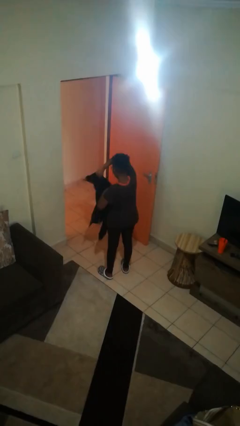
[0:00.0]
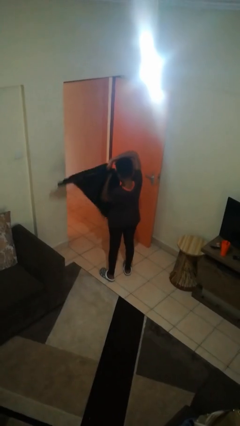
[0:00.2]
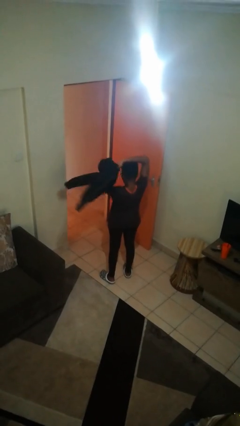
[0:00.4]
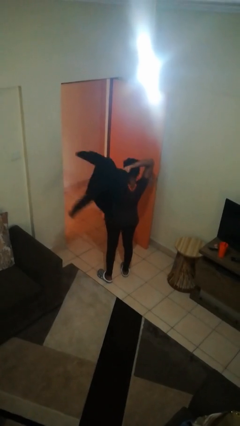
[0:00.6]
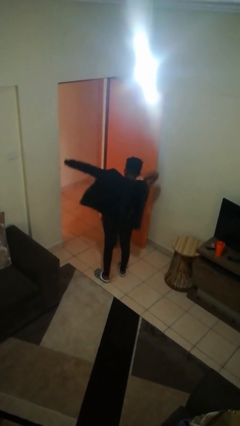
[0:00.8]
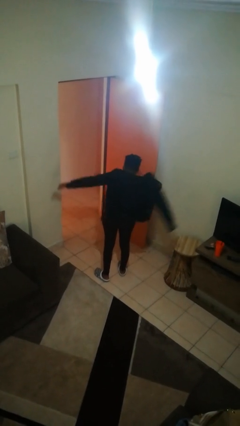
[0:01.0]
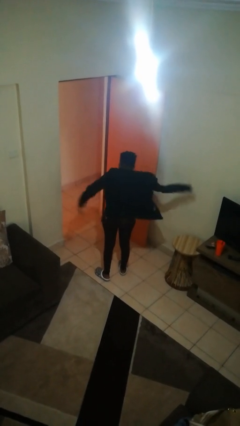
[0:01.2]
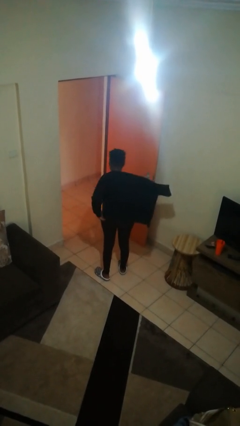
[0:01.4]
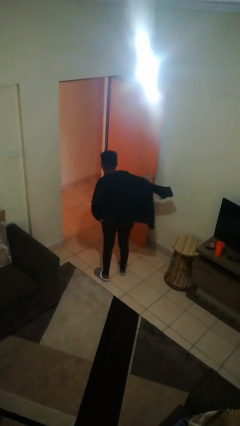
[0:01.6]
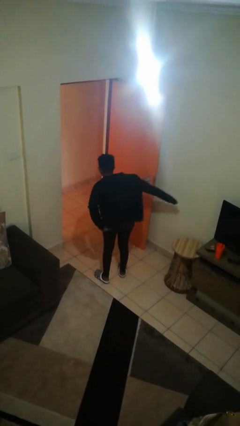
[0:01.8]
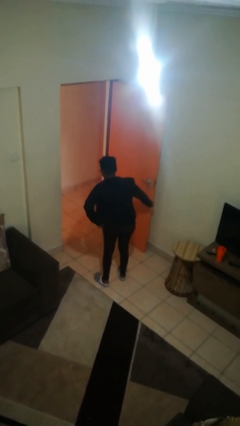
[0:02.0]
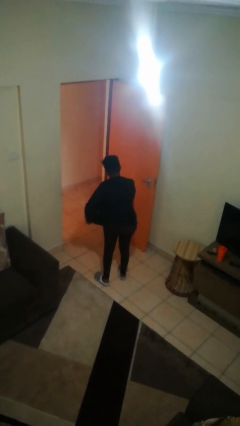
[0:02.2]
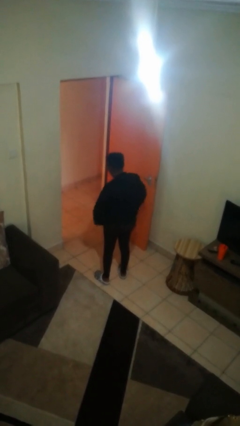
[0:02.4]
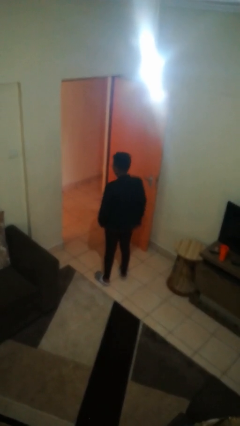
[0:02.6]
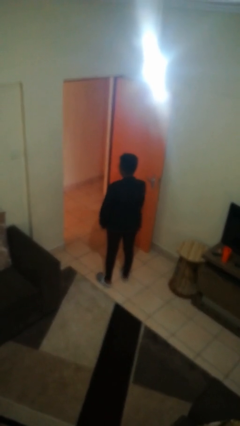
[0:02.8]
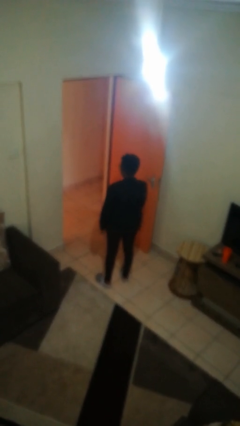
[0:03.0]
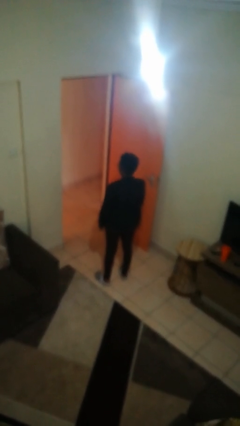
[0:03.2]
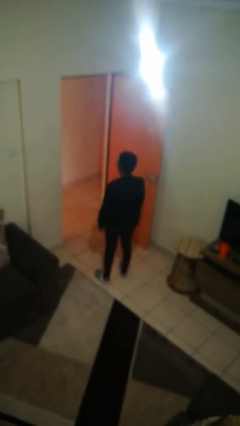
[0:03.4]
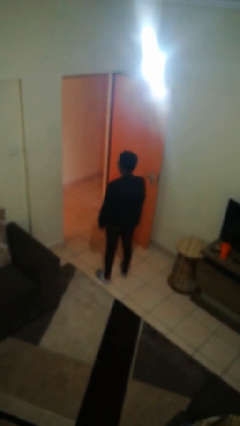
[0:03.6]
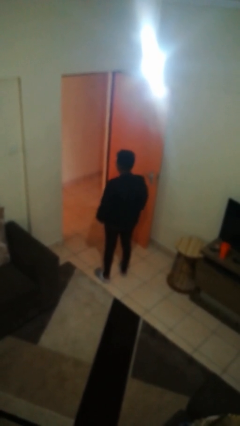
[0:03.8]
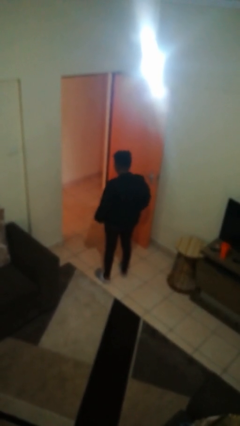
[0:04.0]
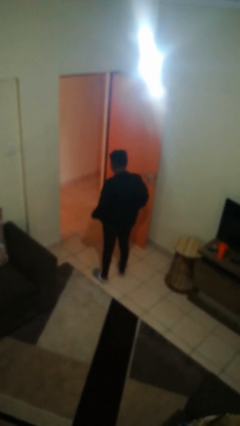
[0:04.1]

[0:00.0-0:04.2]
person puts on jacket

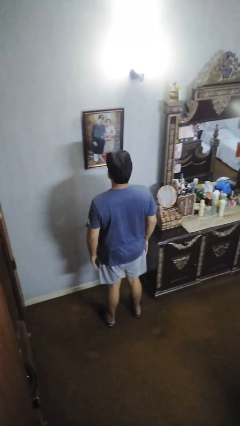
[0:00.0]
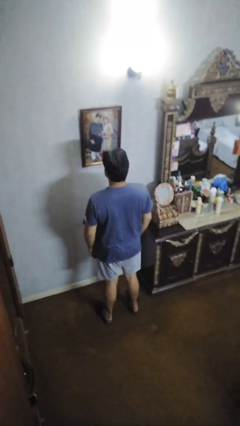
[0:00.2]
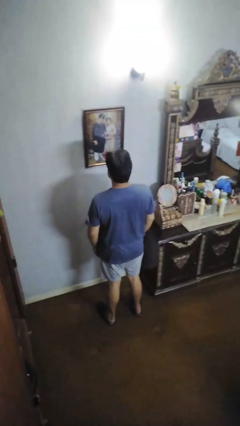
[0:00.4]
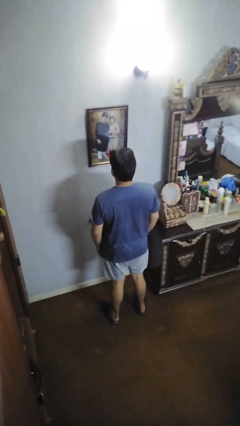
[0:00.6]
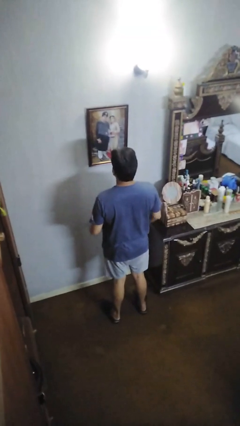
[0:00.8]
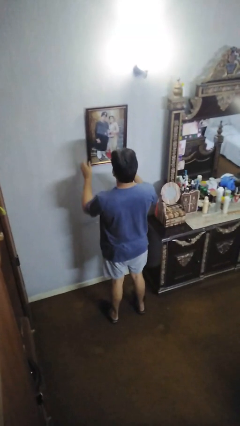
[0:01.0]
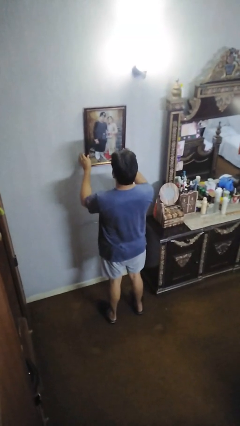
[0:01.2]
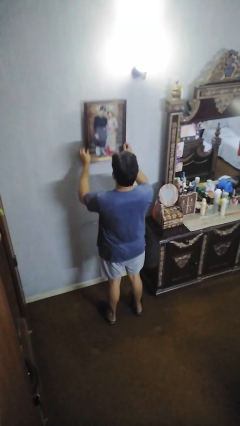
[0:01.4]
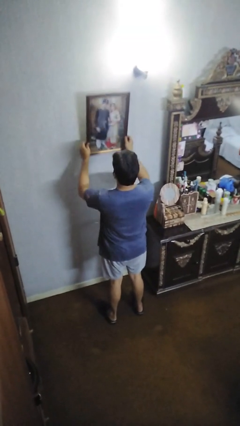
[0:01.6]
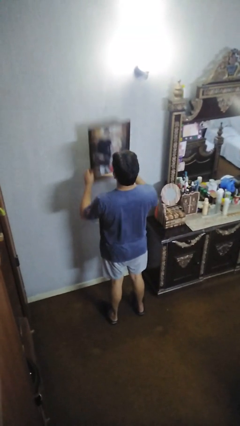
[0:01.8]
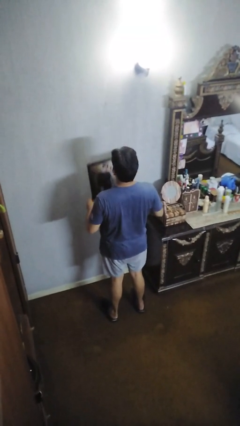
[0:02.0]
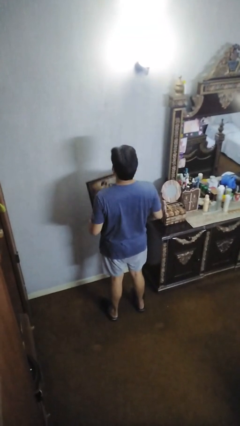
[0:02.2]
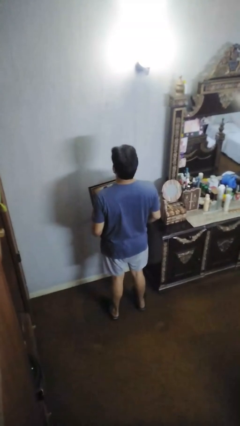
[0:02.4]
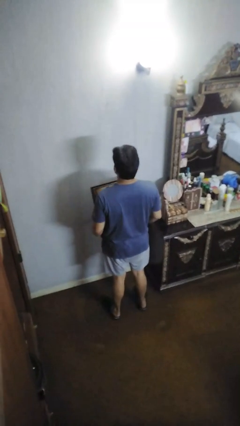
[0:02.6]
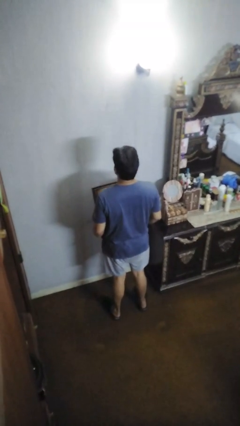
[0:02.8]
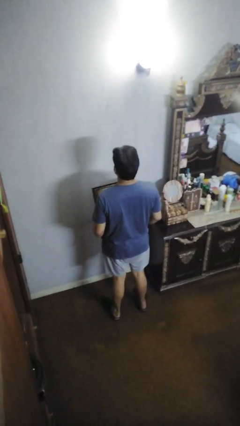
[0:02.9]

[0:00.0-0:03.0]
person takes down picture frame

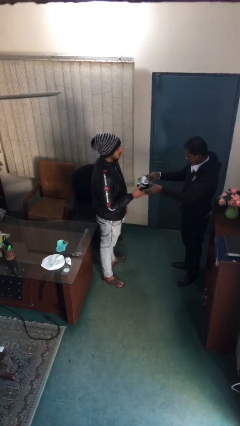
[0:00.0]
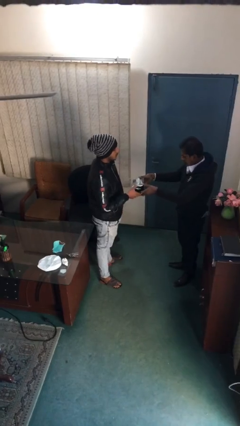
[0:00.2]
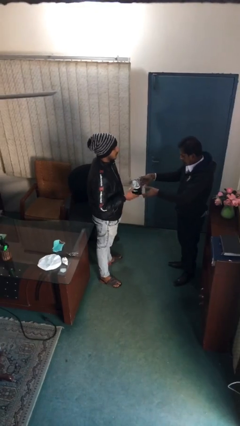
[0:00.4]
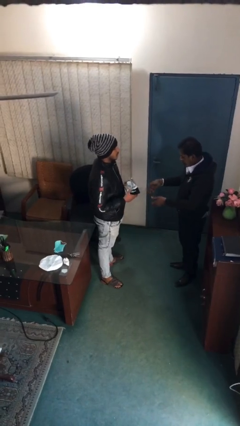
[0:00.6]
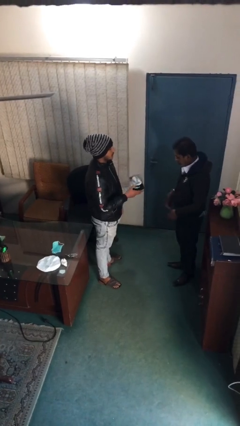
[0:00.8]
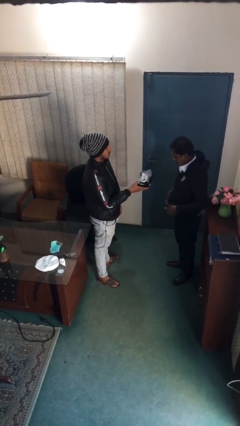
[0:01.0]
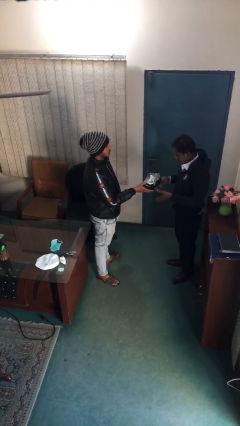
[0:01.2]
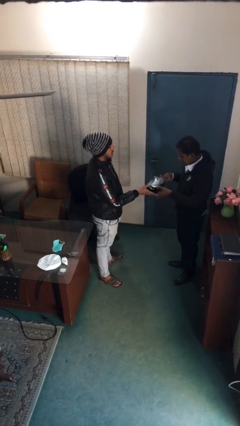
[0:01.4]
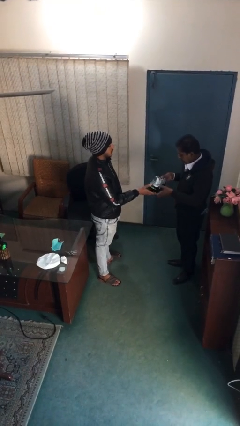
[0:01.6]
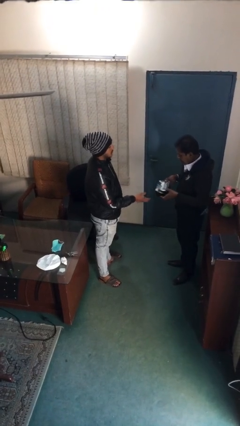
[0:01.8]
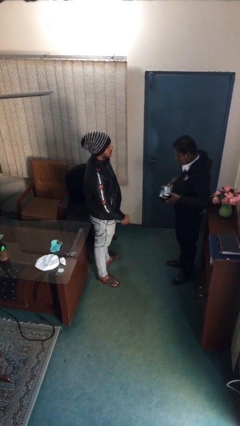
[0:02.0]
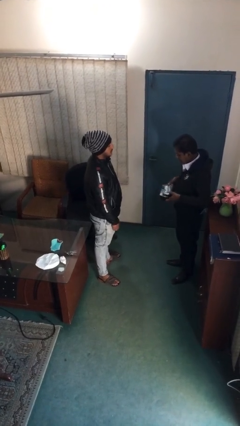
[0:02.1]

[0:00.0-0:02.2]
person transfers object to person

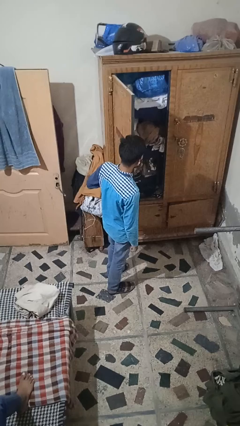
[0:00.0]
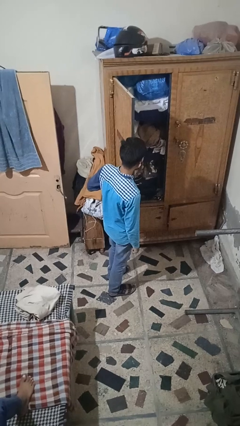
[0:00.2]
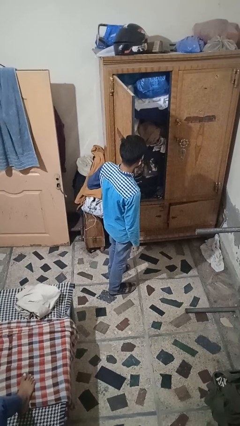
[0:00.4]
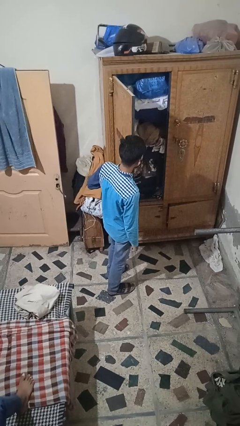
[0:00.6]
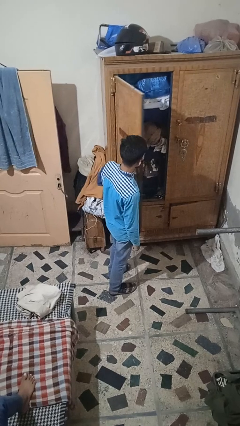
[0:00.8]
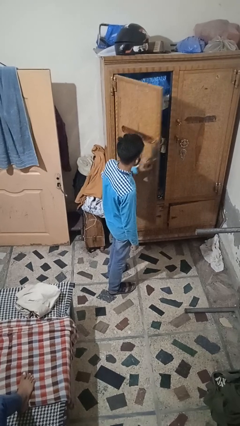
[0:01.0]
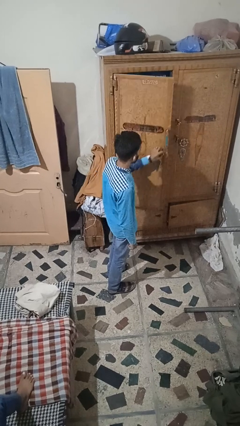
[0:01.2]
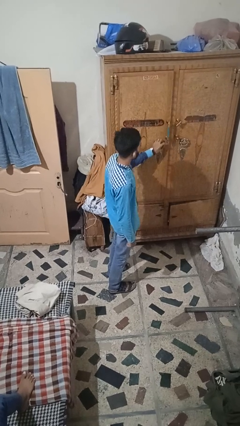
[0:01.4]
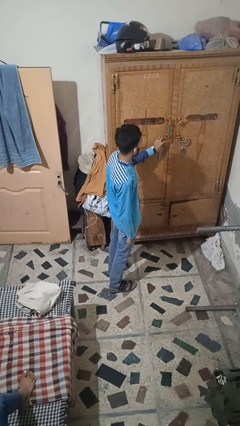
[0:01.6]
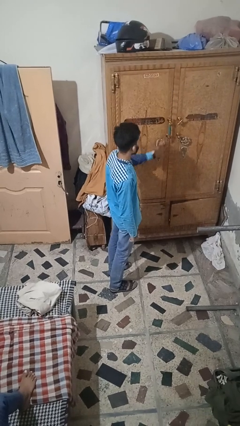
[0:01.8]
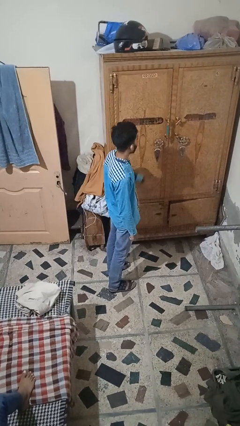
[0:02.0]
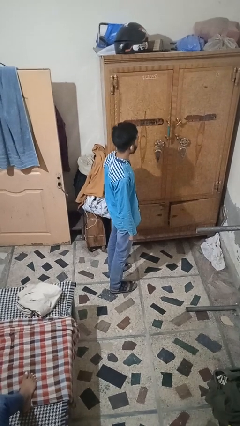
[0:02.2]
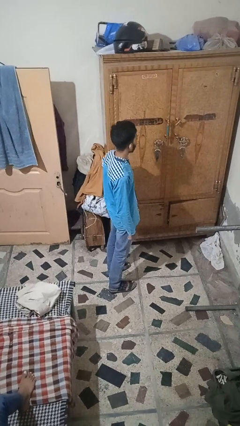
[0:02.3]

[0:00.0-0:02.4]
person closes closet door

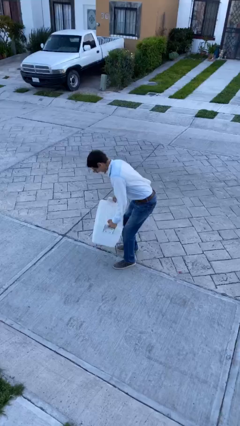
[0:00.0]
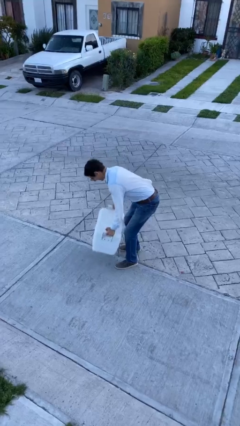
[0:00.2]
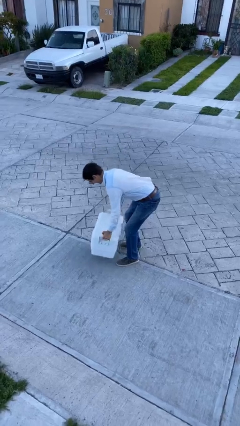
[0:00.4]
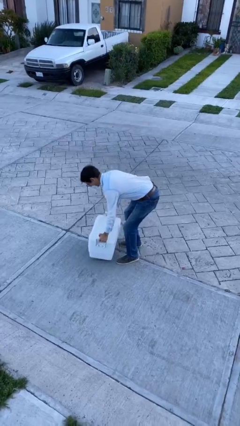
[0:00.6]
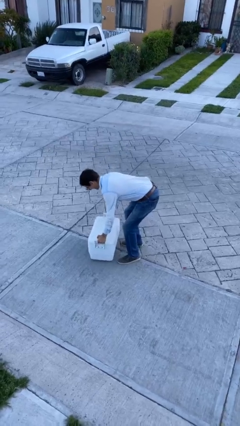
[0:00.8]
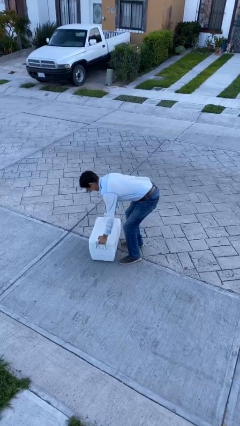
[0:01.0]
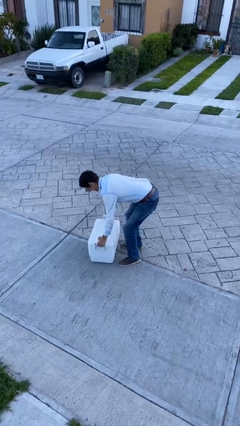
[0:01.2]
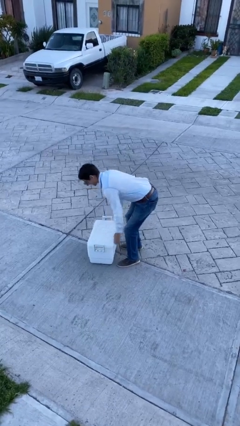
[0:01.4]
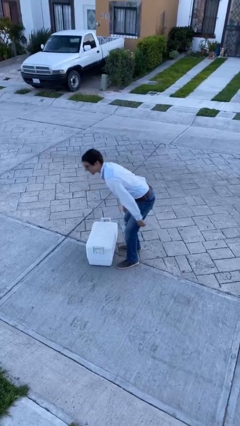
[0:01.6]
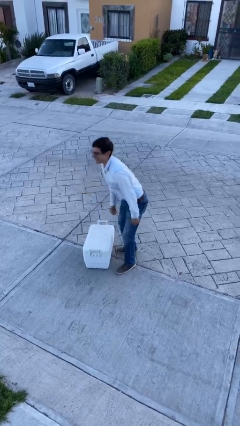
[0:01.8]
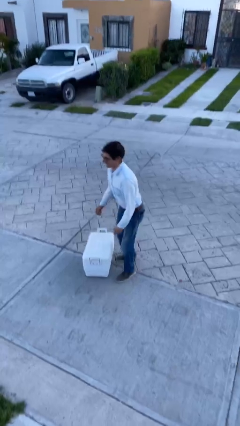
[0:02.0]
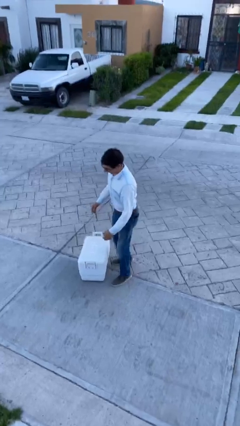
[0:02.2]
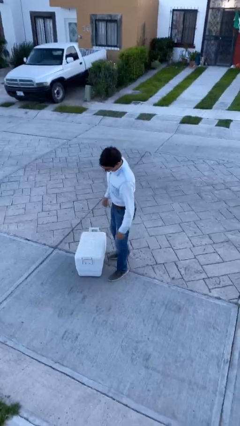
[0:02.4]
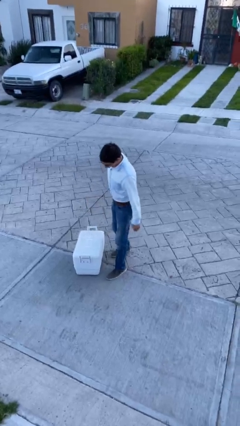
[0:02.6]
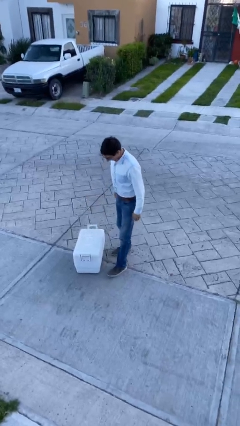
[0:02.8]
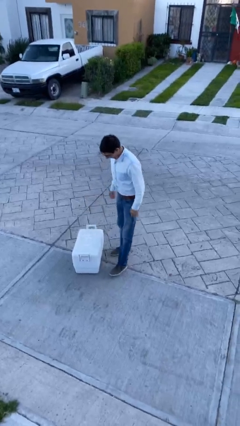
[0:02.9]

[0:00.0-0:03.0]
person puts down object on floor

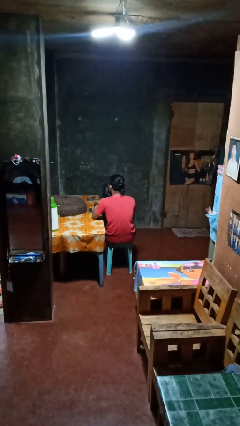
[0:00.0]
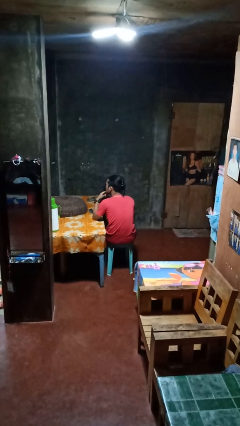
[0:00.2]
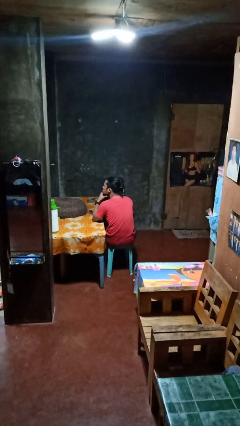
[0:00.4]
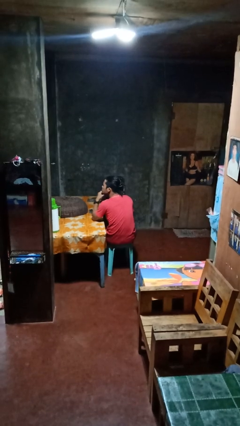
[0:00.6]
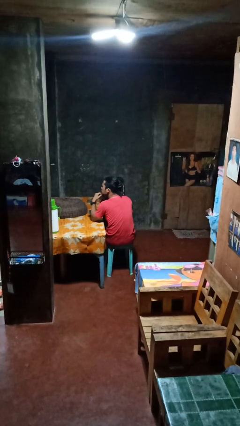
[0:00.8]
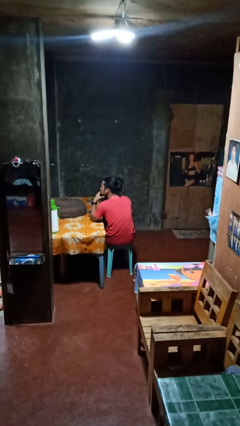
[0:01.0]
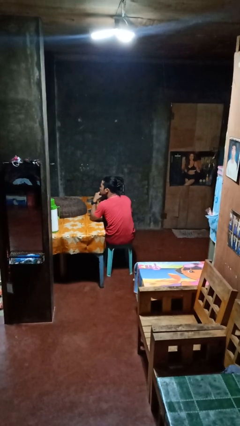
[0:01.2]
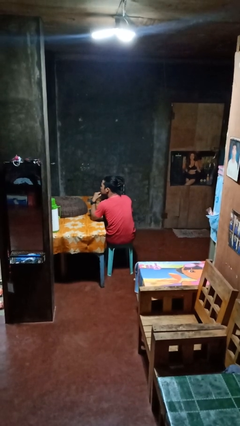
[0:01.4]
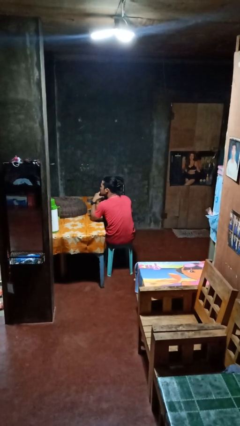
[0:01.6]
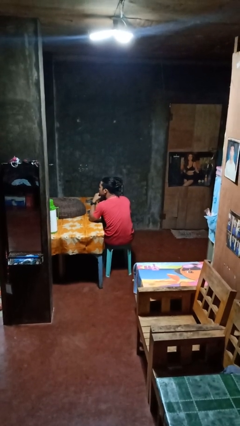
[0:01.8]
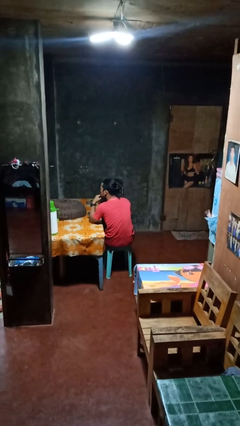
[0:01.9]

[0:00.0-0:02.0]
person strokes chin

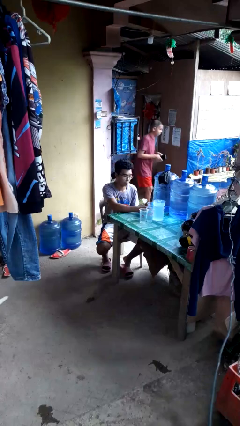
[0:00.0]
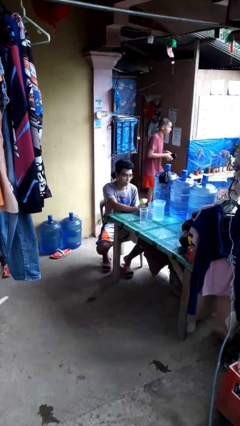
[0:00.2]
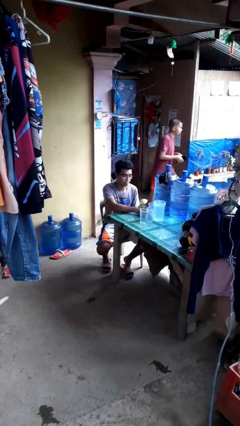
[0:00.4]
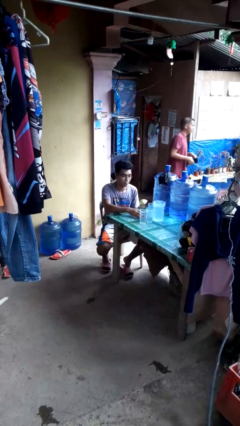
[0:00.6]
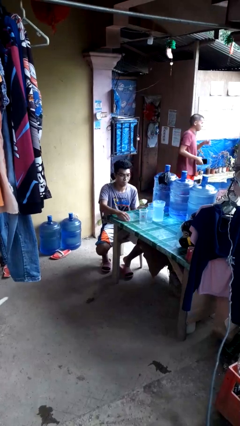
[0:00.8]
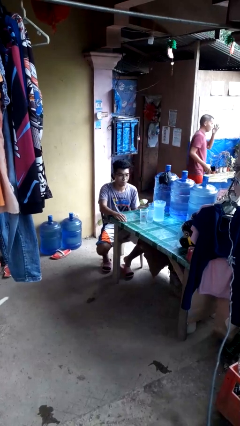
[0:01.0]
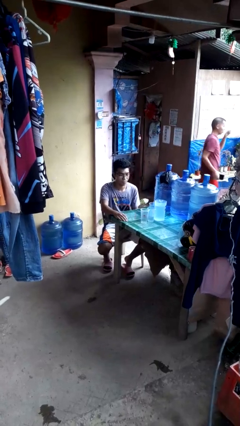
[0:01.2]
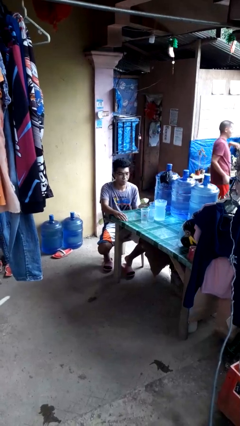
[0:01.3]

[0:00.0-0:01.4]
person puts down object on table
